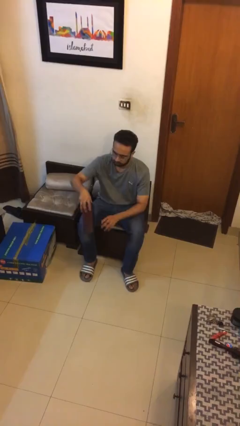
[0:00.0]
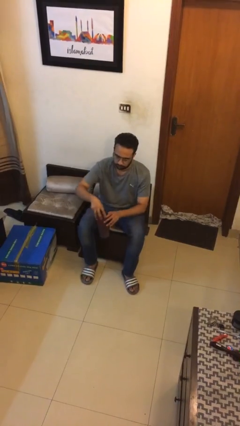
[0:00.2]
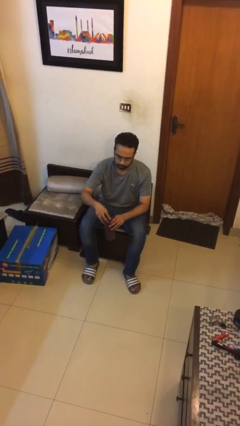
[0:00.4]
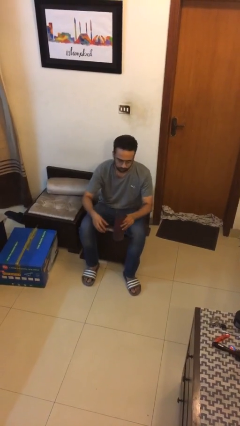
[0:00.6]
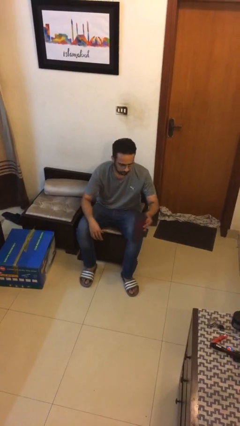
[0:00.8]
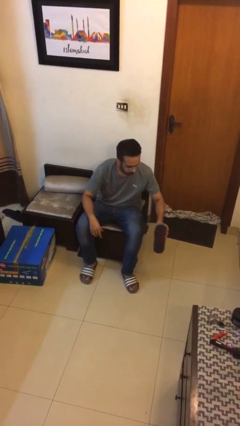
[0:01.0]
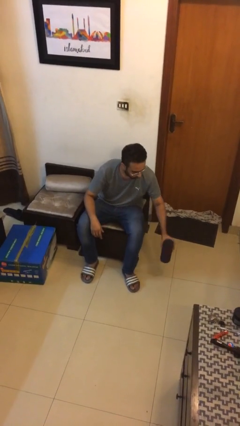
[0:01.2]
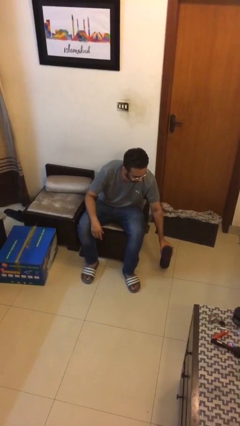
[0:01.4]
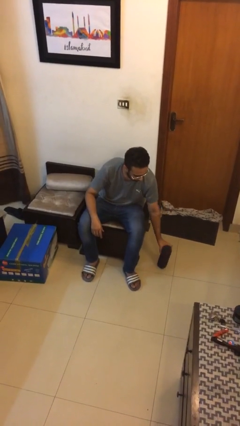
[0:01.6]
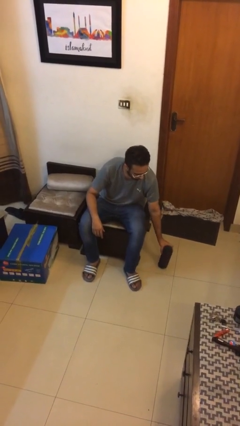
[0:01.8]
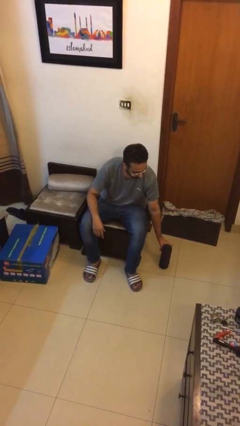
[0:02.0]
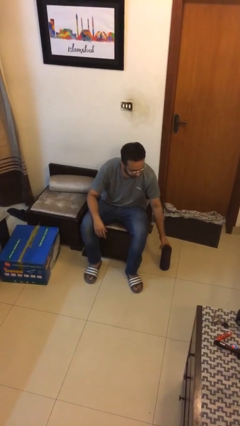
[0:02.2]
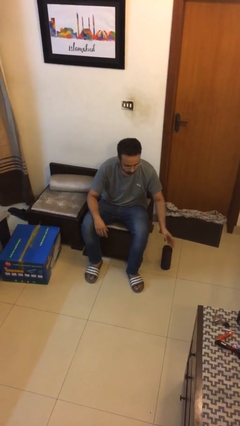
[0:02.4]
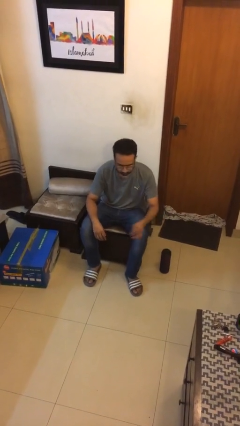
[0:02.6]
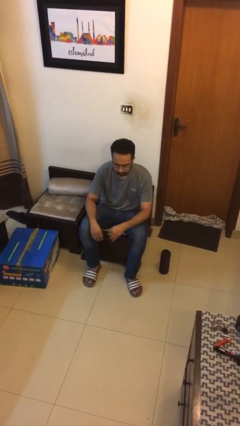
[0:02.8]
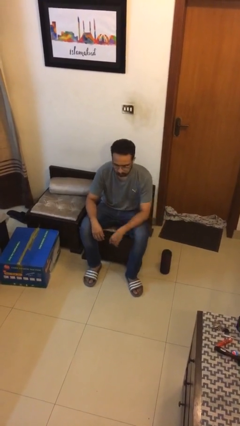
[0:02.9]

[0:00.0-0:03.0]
person puts down object on floor

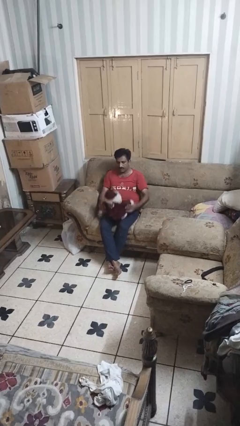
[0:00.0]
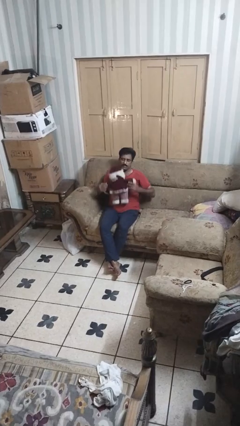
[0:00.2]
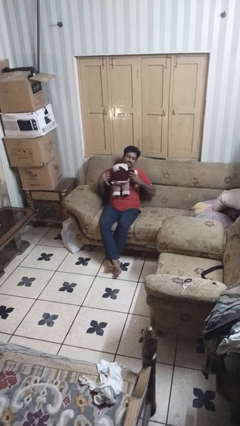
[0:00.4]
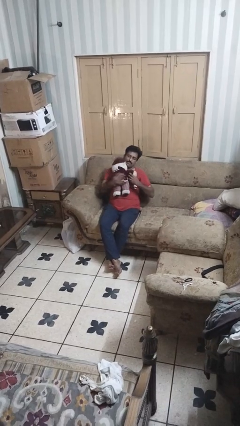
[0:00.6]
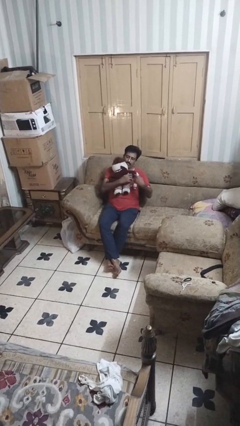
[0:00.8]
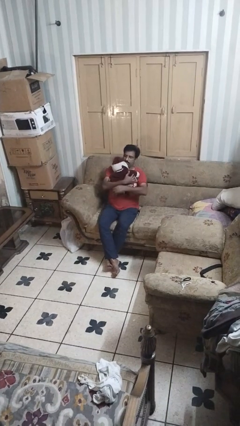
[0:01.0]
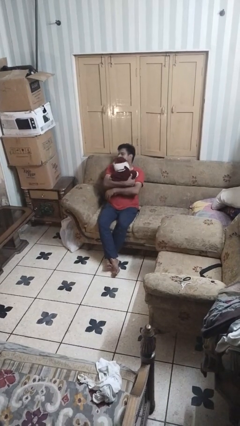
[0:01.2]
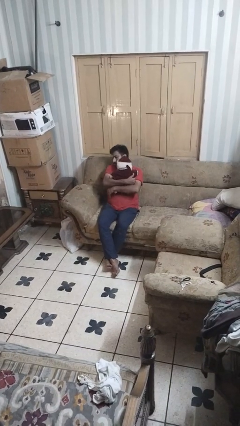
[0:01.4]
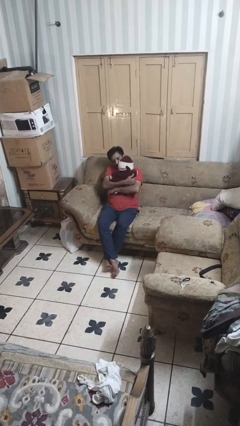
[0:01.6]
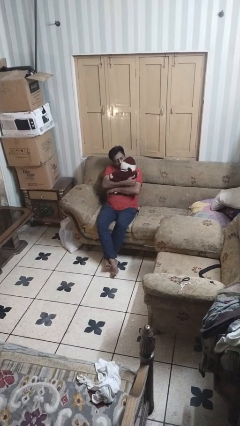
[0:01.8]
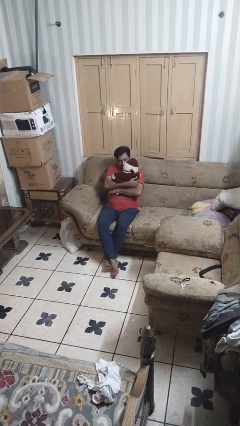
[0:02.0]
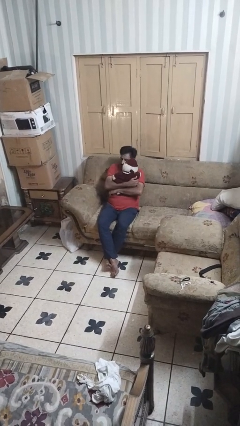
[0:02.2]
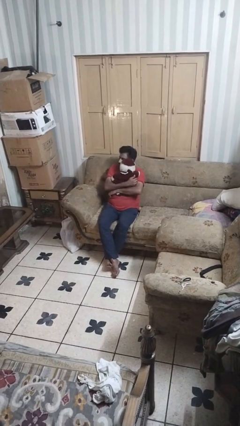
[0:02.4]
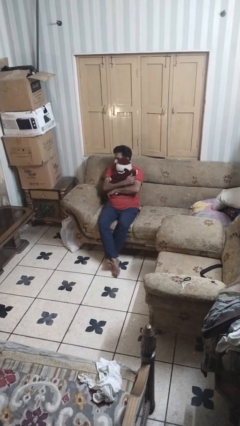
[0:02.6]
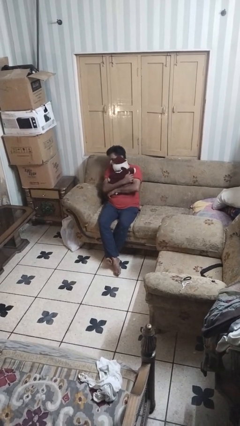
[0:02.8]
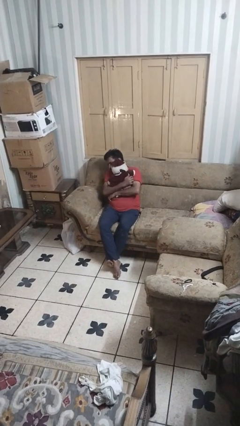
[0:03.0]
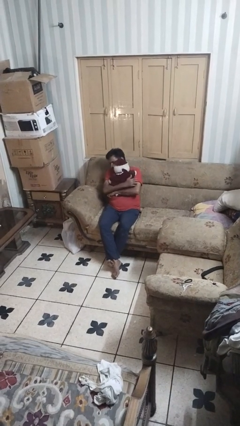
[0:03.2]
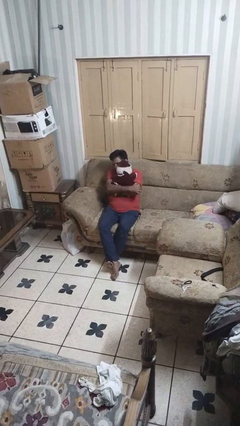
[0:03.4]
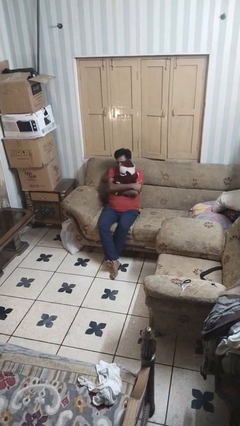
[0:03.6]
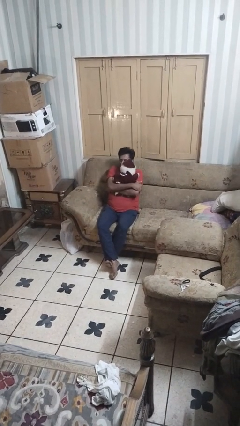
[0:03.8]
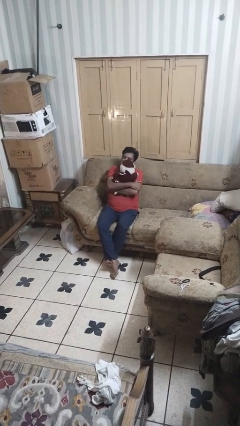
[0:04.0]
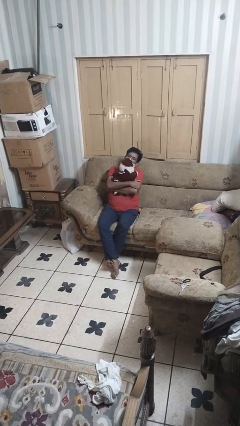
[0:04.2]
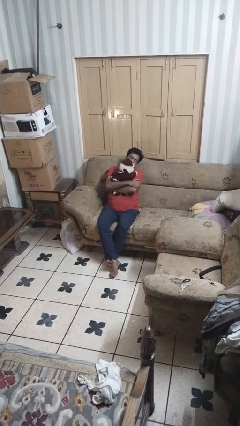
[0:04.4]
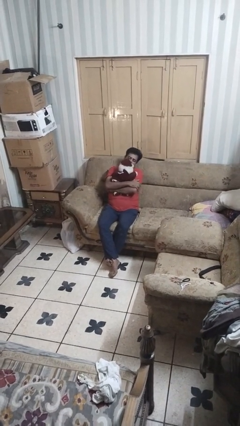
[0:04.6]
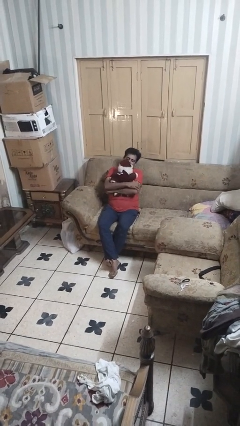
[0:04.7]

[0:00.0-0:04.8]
person hugs stuffed animal

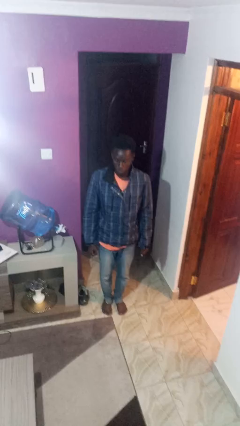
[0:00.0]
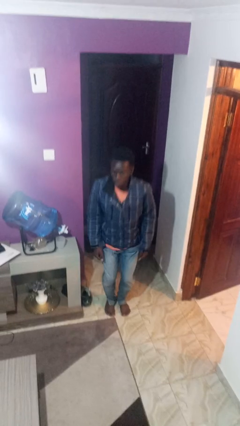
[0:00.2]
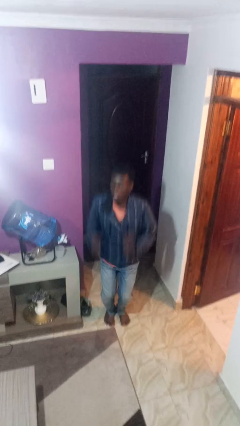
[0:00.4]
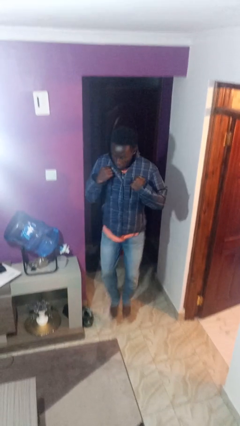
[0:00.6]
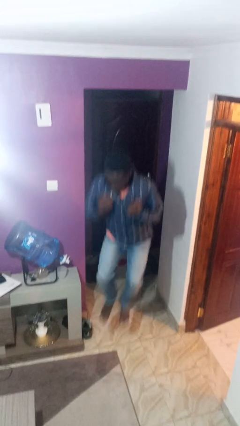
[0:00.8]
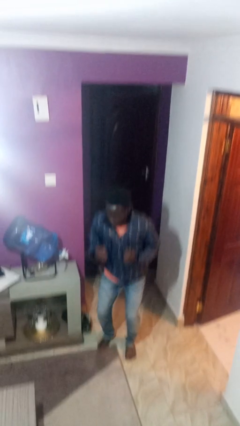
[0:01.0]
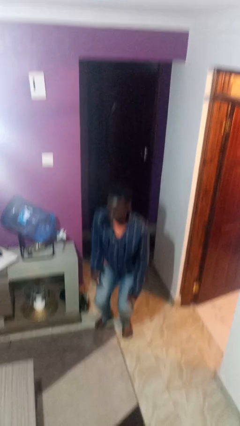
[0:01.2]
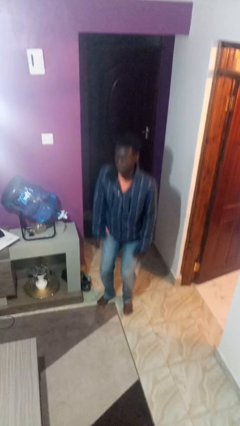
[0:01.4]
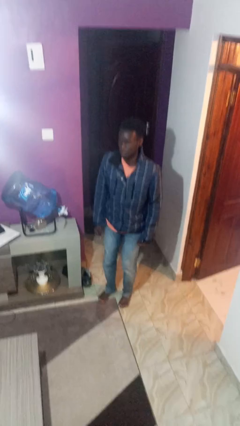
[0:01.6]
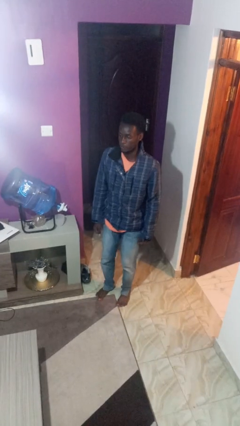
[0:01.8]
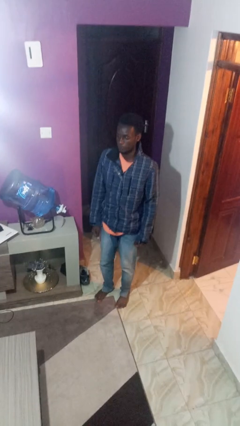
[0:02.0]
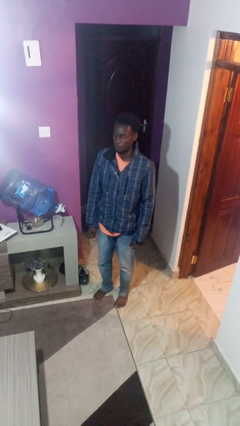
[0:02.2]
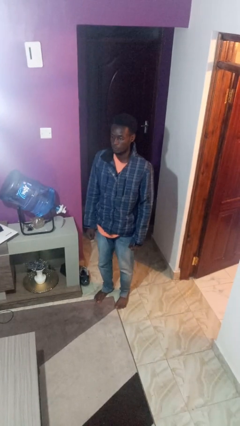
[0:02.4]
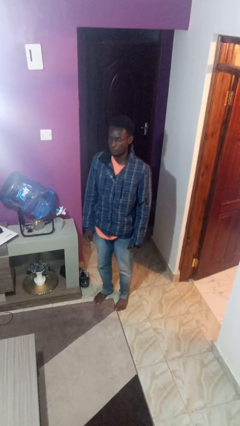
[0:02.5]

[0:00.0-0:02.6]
person jumps

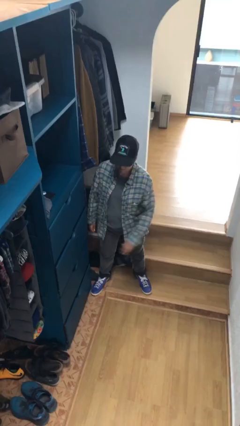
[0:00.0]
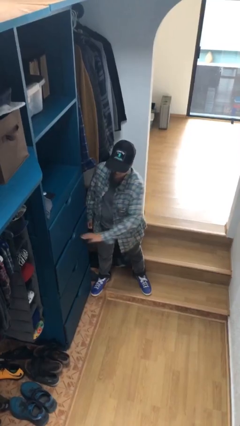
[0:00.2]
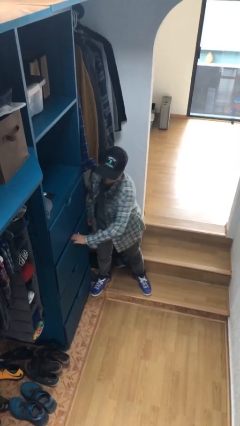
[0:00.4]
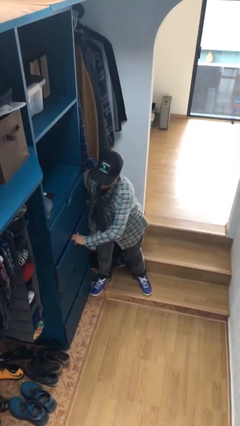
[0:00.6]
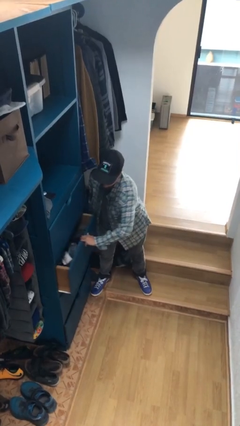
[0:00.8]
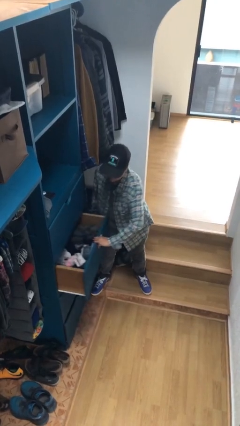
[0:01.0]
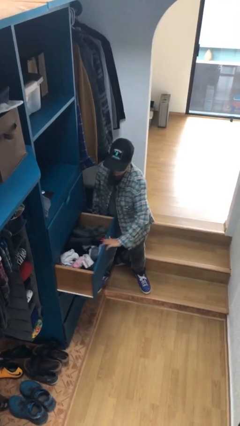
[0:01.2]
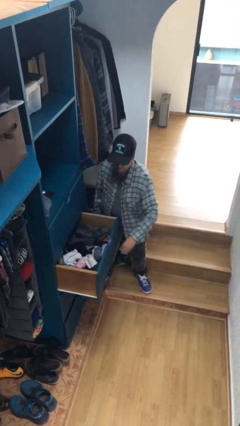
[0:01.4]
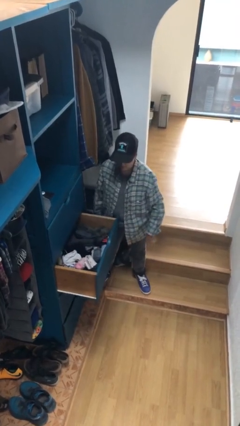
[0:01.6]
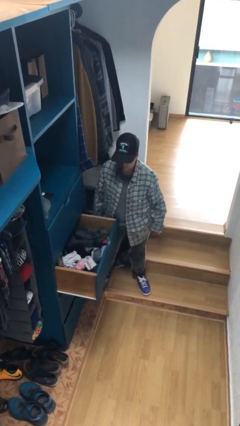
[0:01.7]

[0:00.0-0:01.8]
person opens dresser drawer

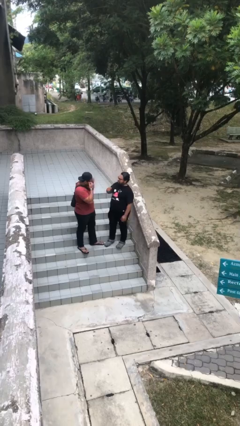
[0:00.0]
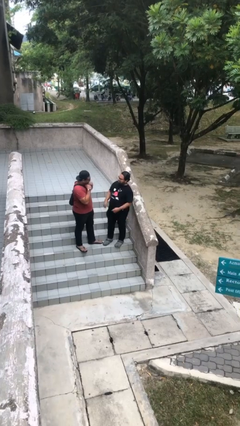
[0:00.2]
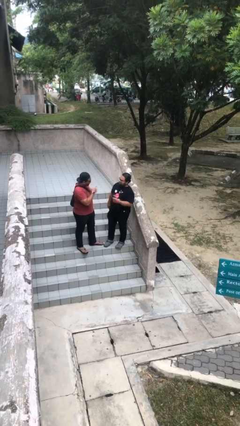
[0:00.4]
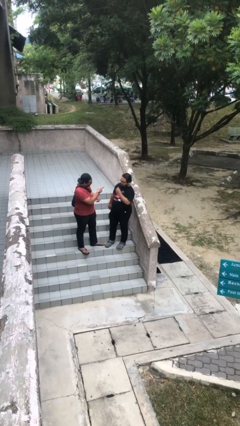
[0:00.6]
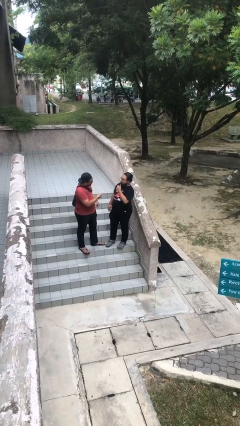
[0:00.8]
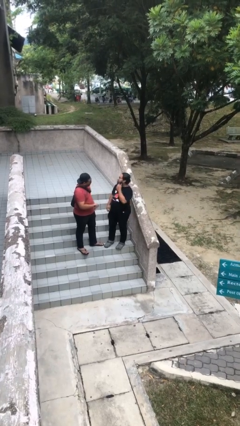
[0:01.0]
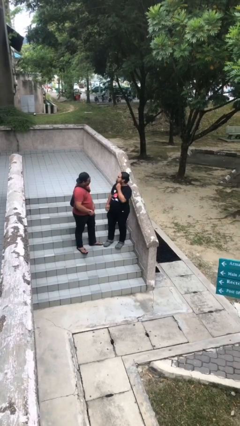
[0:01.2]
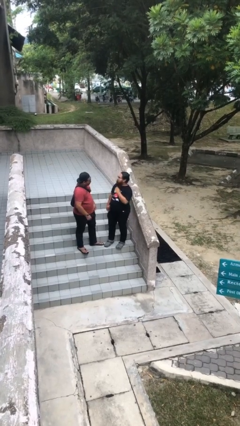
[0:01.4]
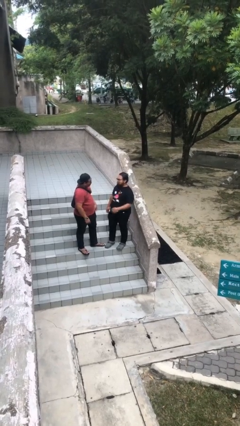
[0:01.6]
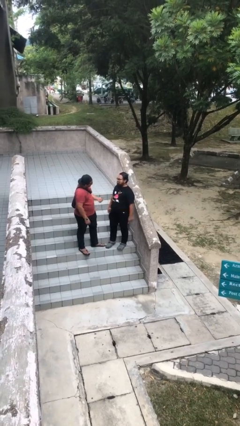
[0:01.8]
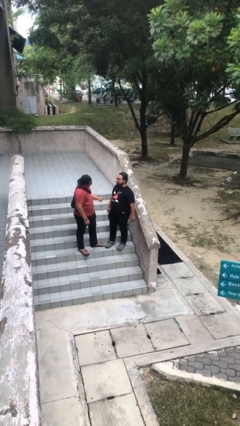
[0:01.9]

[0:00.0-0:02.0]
person talks to person

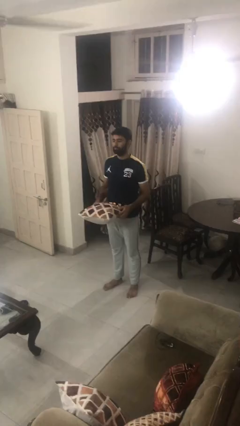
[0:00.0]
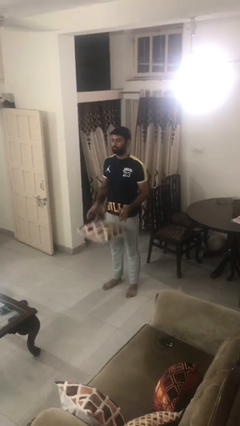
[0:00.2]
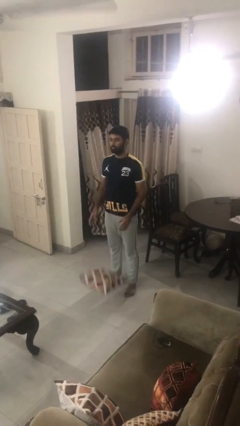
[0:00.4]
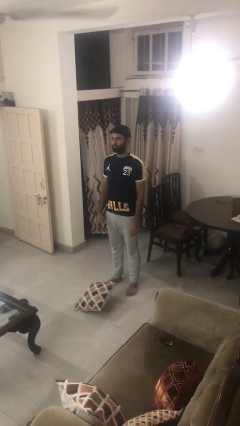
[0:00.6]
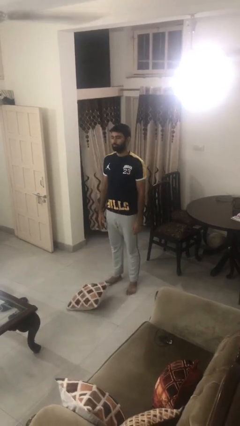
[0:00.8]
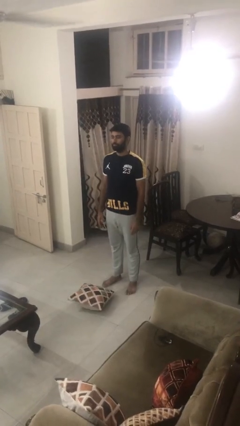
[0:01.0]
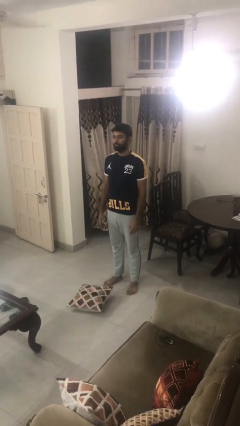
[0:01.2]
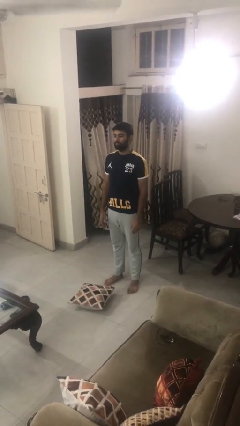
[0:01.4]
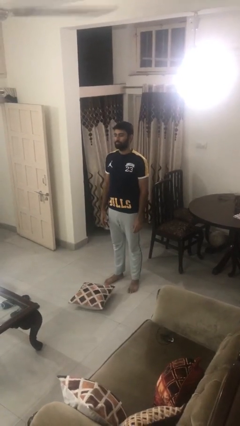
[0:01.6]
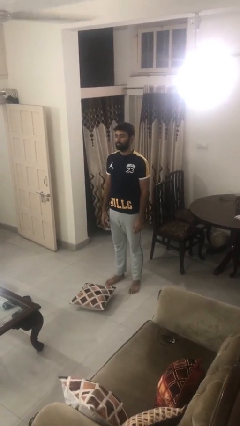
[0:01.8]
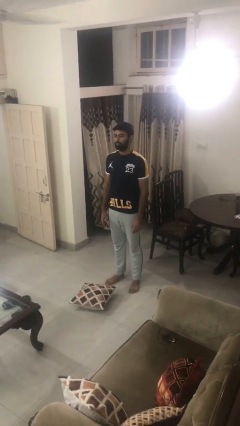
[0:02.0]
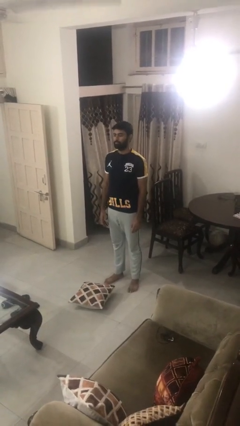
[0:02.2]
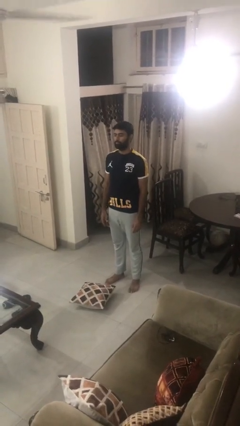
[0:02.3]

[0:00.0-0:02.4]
person drops object

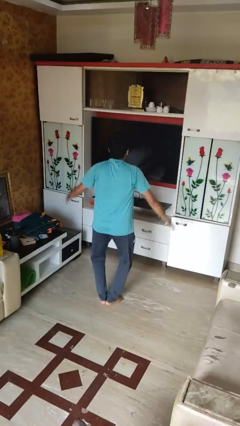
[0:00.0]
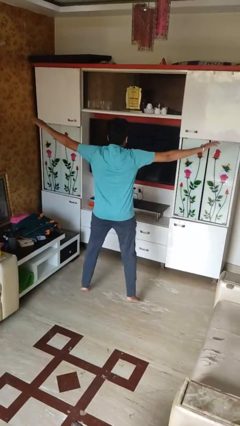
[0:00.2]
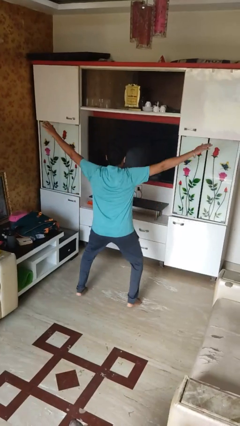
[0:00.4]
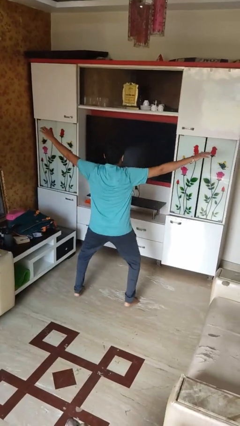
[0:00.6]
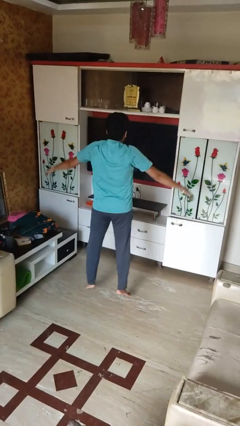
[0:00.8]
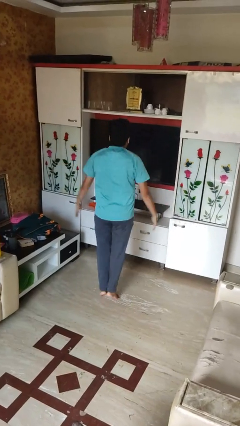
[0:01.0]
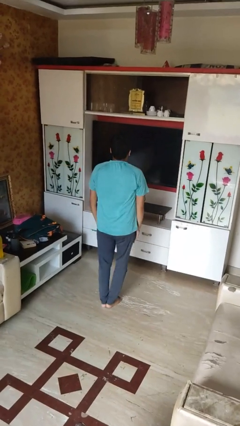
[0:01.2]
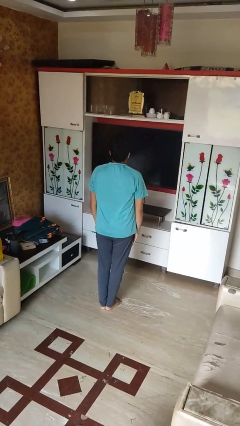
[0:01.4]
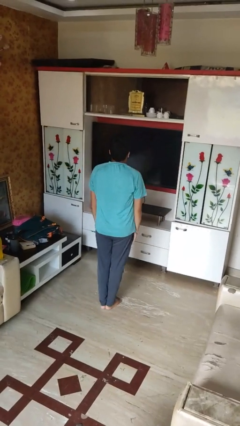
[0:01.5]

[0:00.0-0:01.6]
person exercises with jumping jacks
